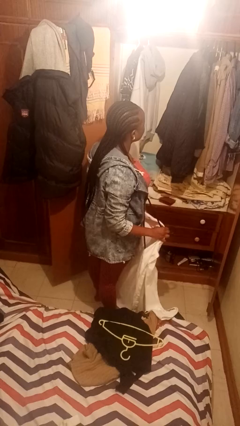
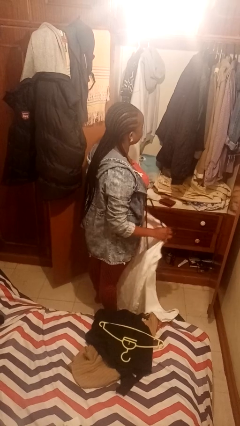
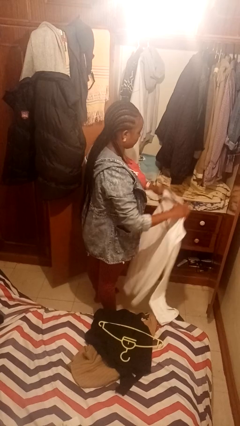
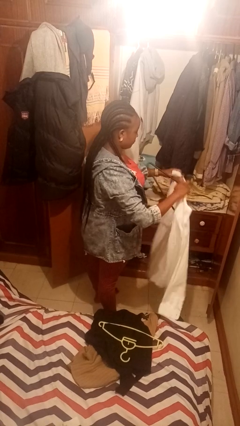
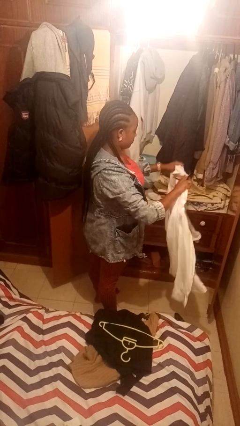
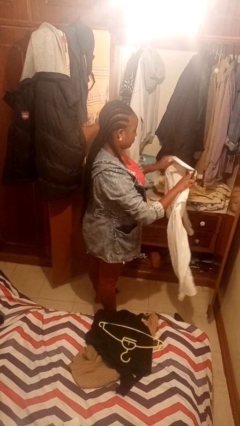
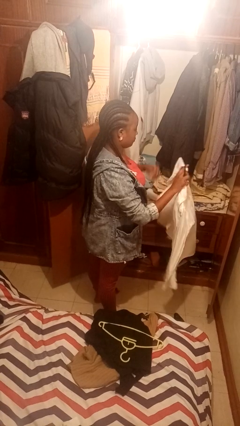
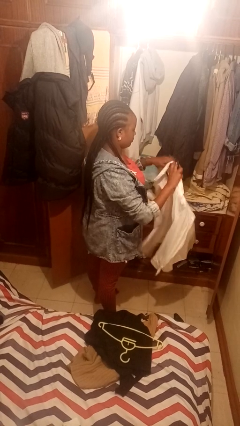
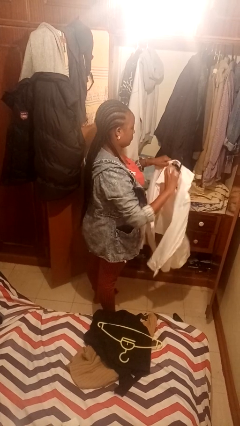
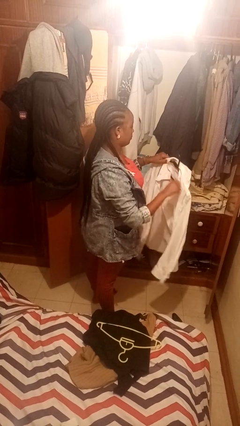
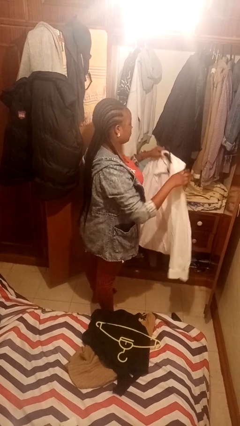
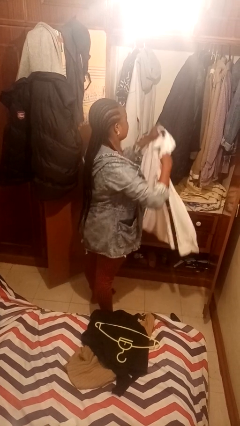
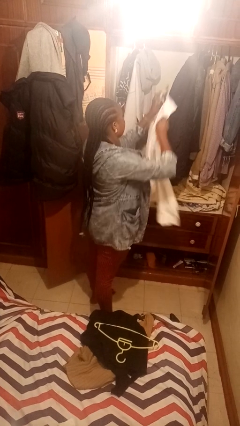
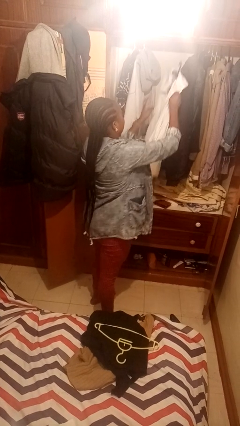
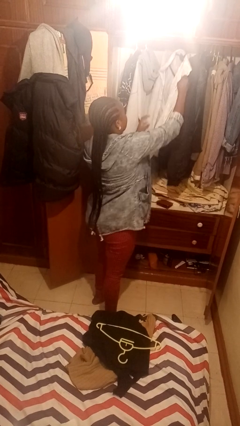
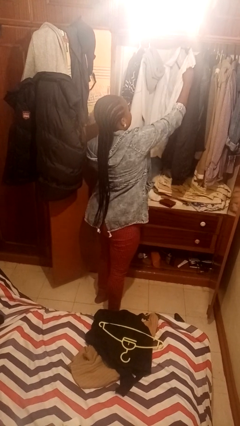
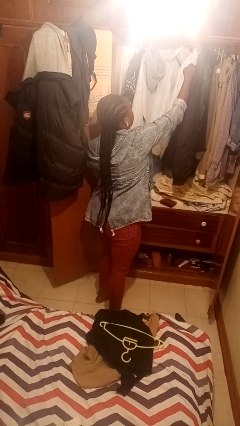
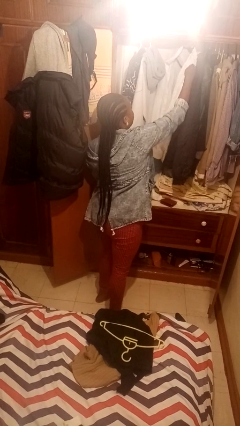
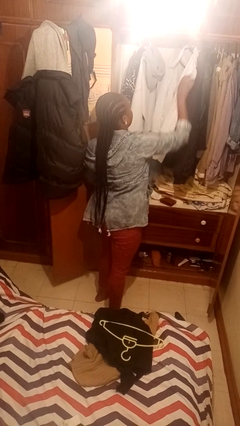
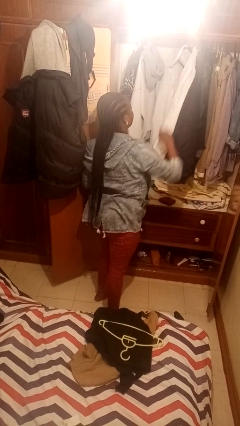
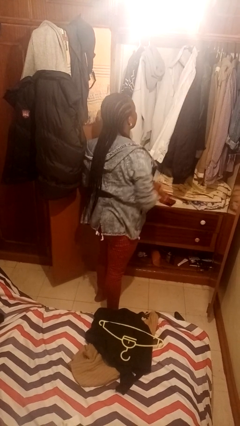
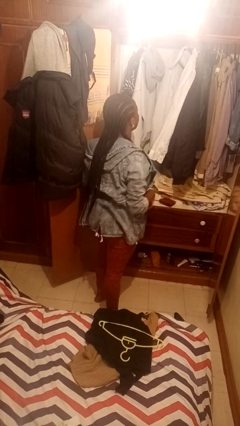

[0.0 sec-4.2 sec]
person puts clothes into closet

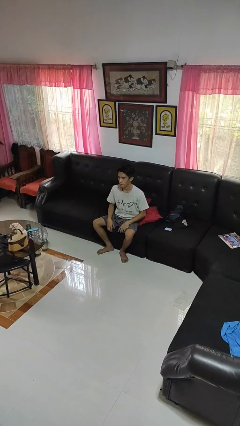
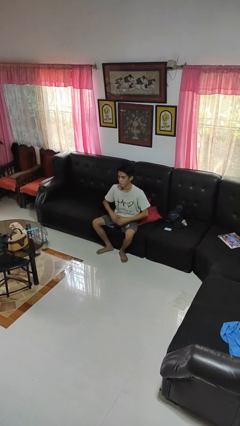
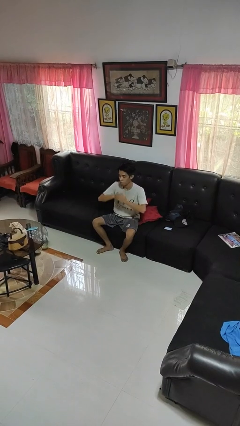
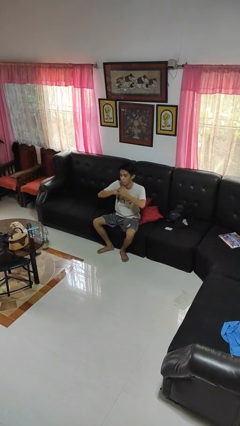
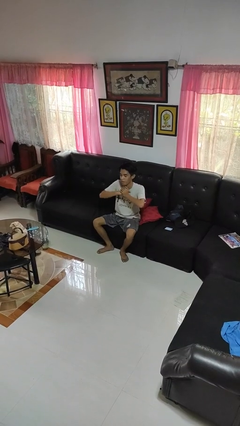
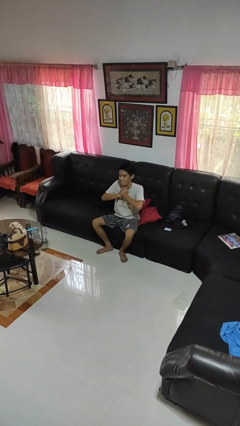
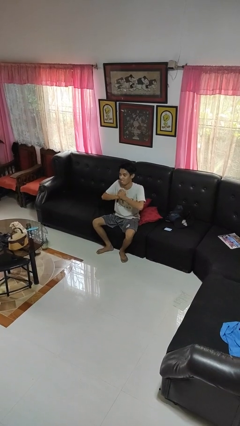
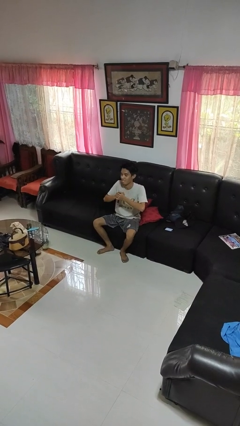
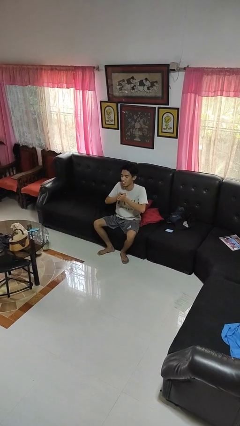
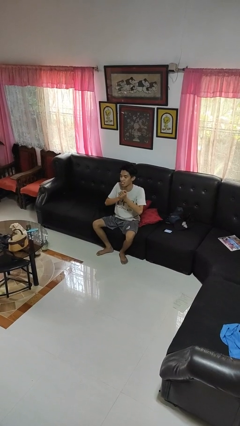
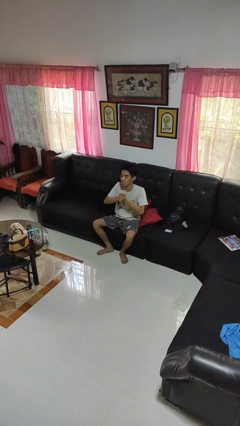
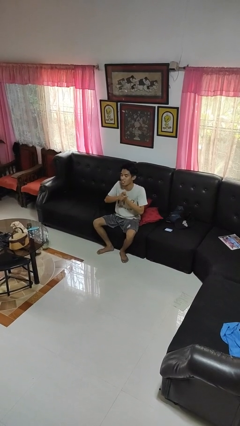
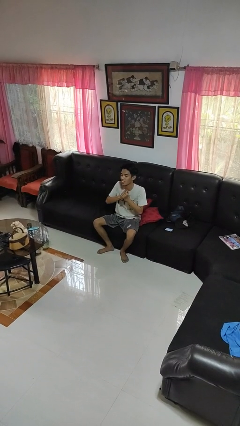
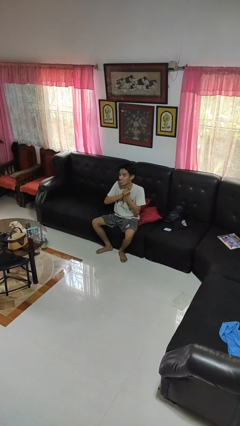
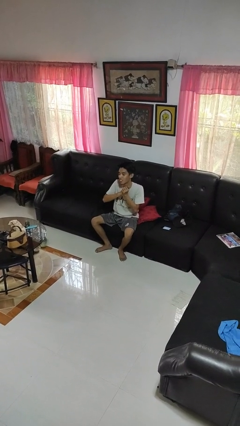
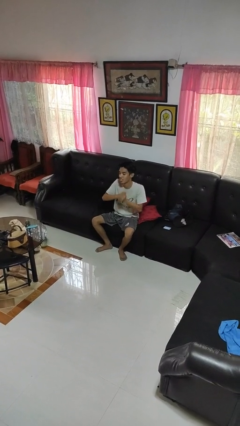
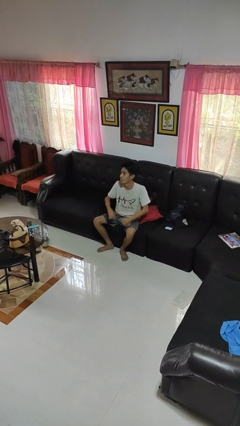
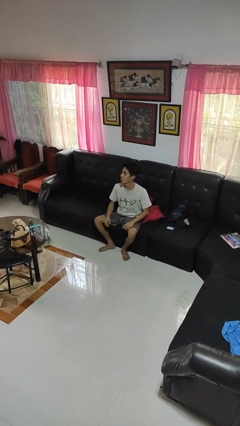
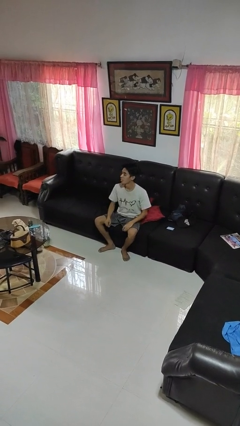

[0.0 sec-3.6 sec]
person cracks knuckles

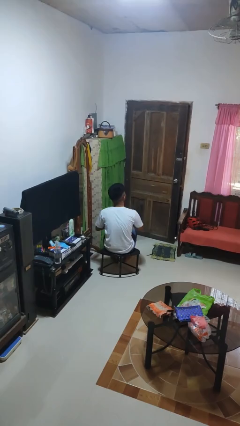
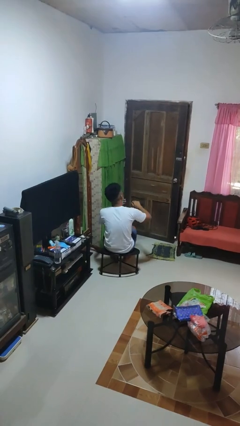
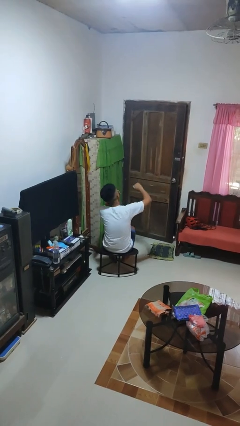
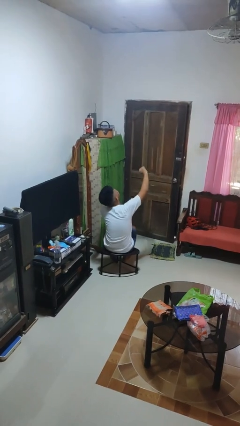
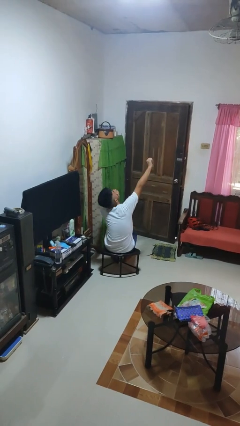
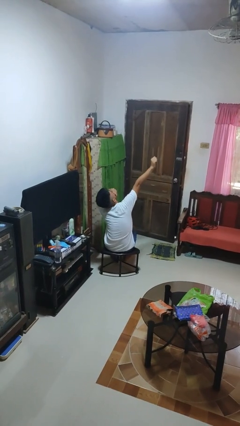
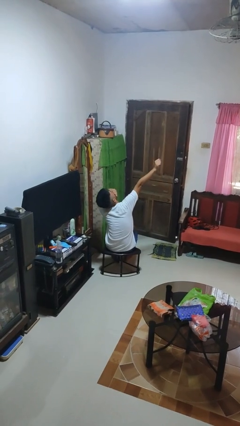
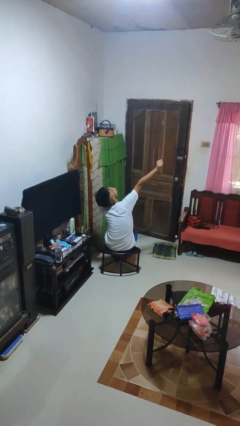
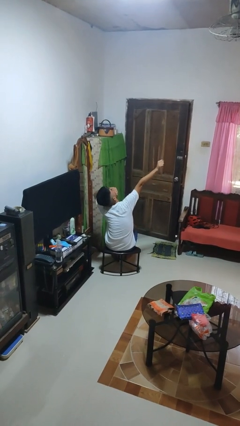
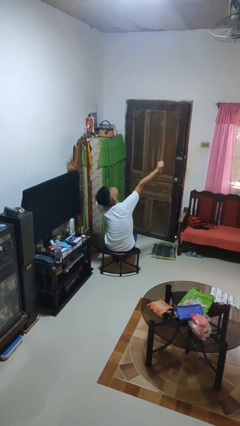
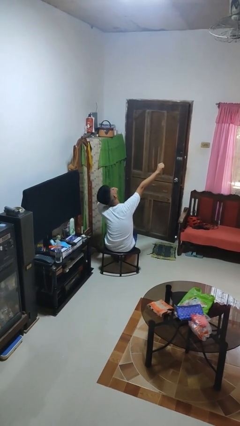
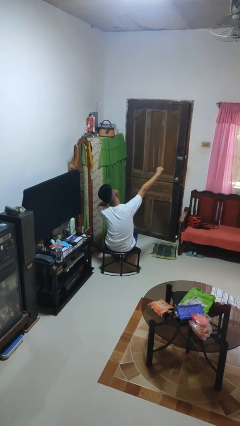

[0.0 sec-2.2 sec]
person yawns

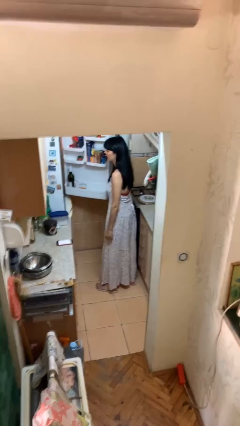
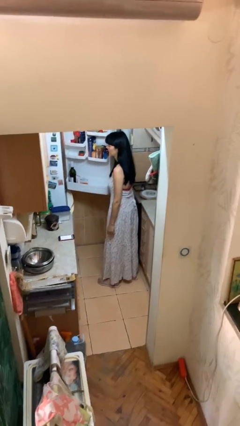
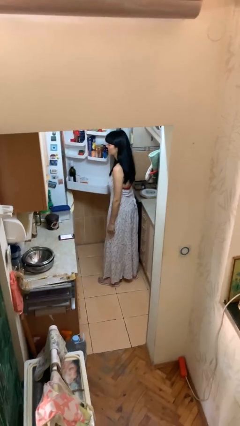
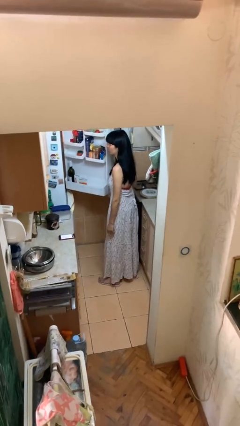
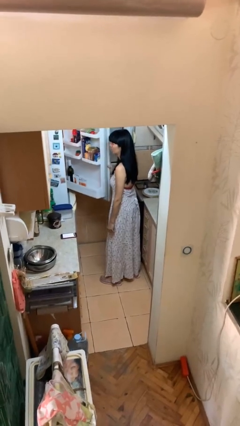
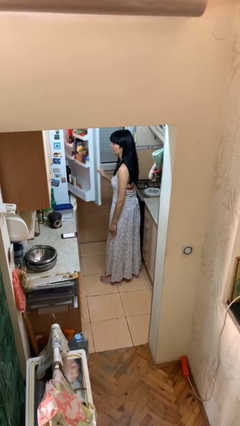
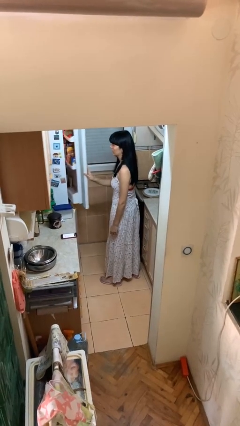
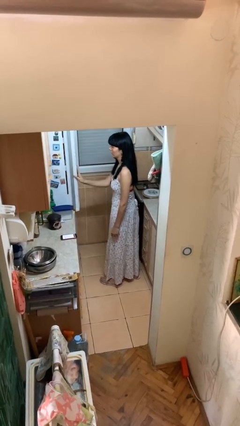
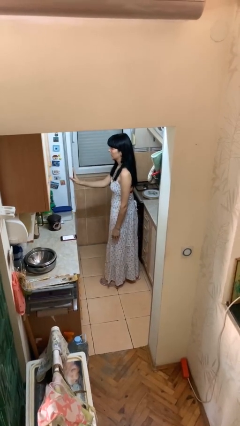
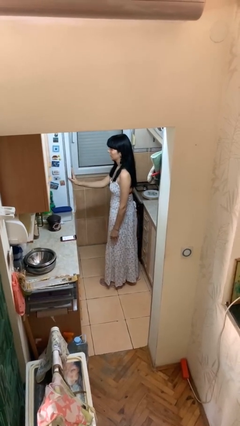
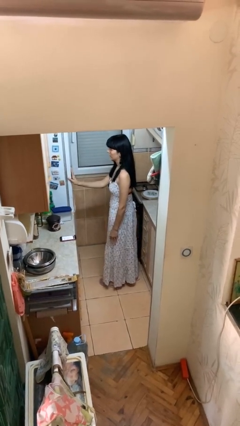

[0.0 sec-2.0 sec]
person closes refrigerator

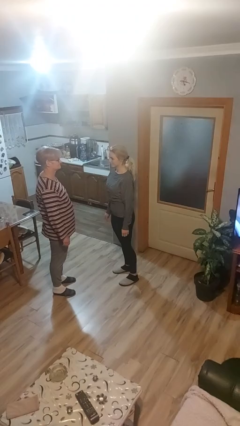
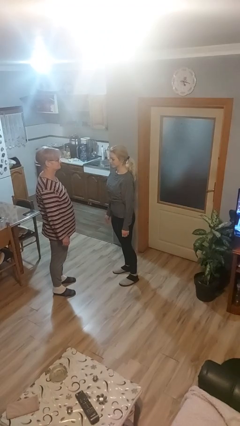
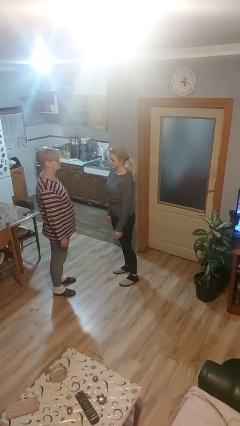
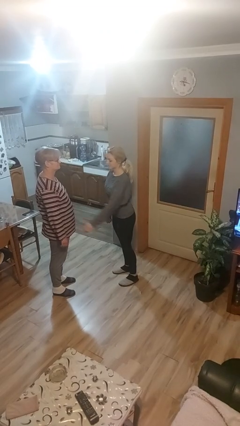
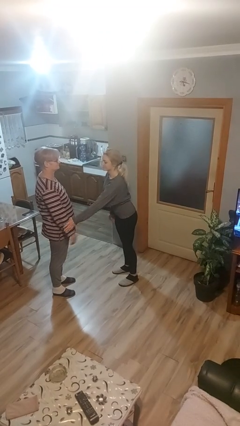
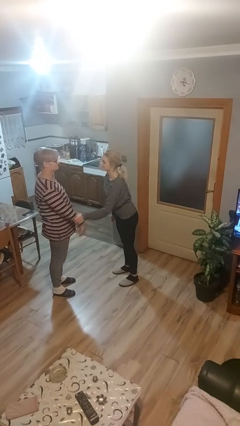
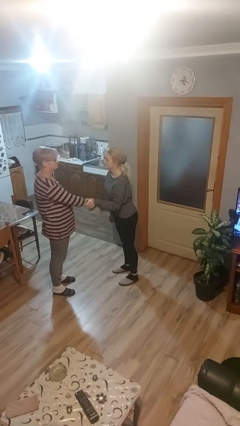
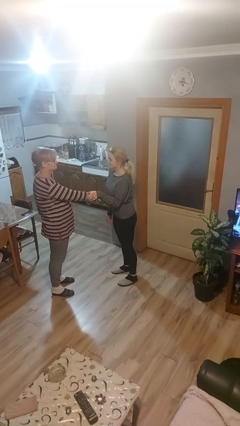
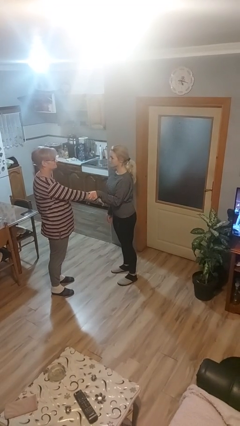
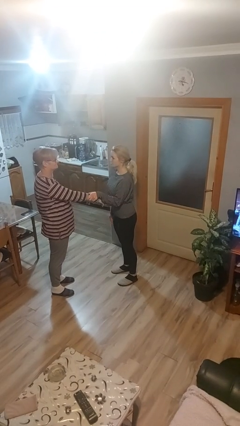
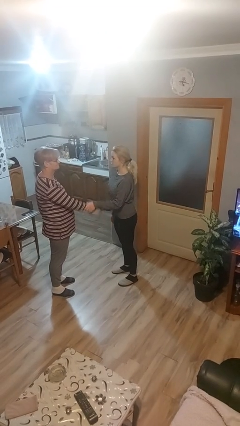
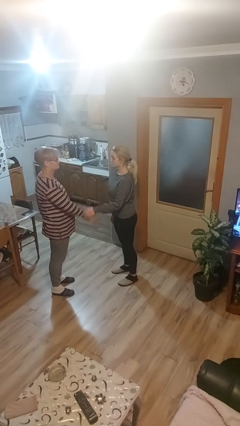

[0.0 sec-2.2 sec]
person grabs person by forearm

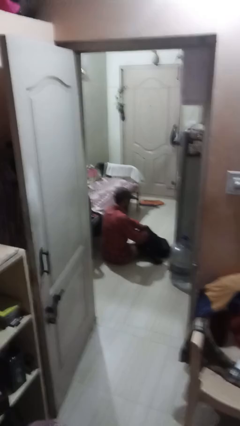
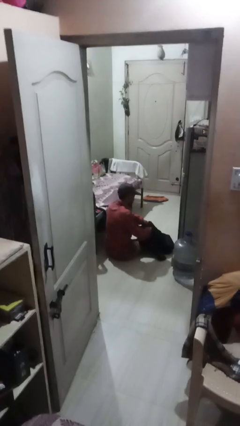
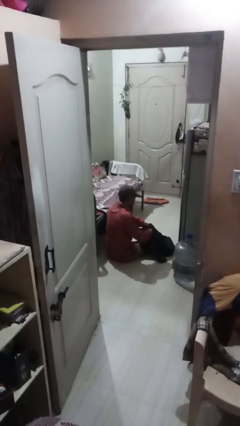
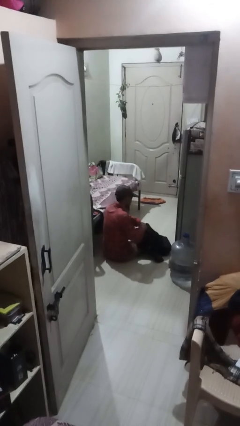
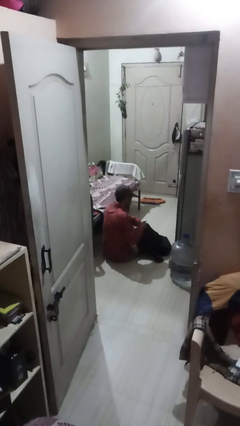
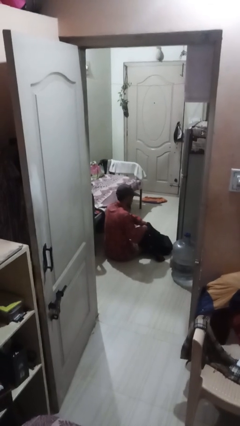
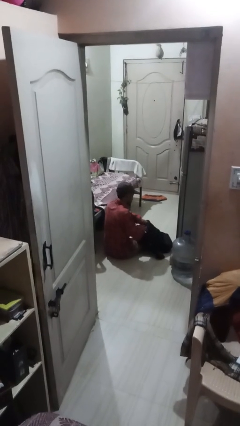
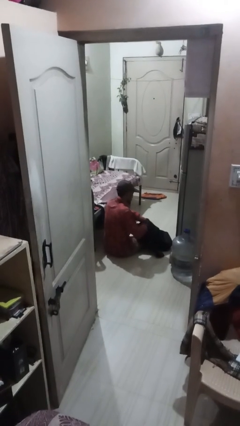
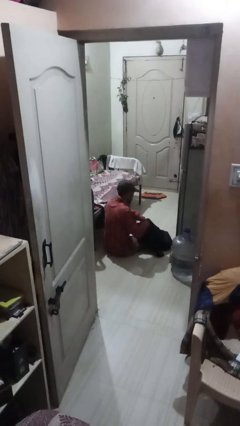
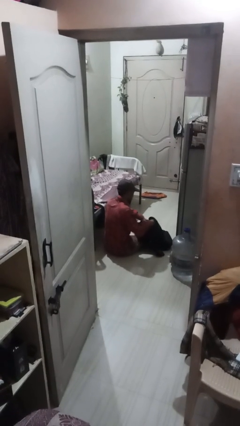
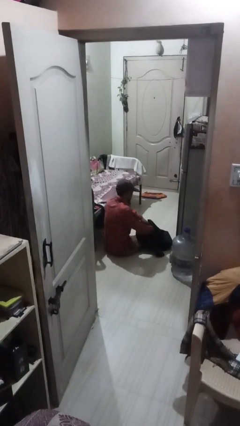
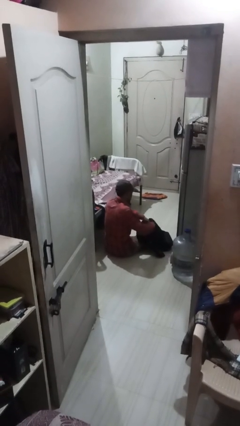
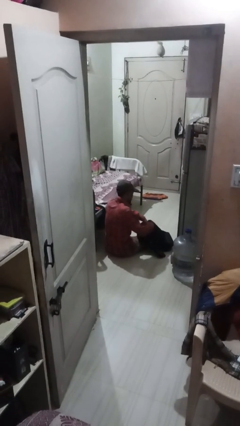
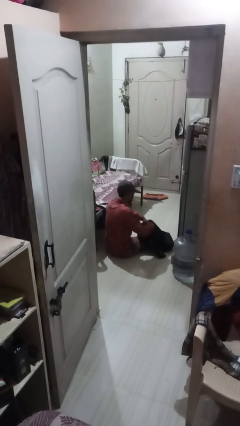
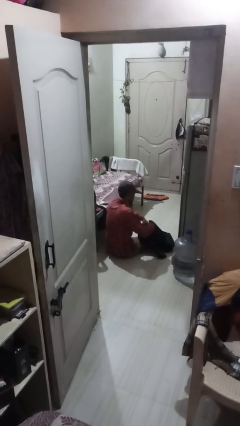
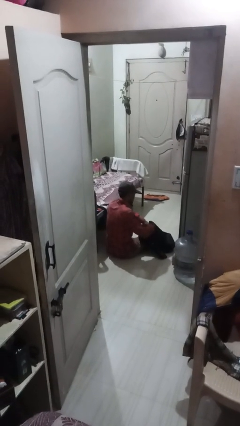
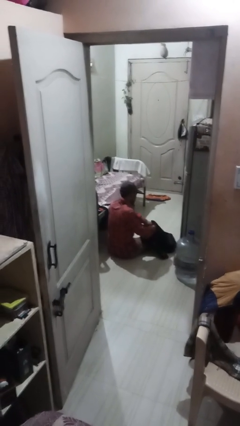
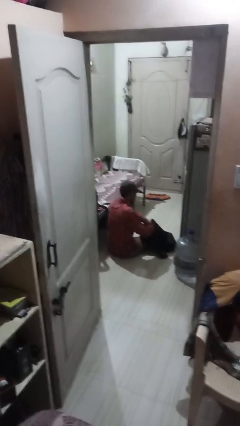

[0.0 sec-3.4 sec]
person searches in backpack

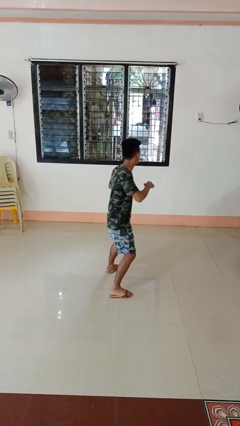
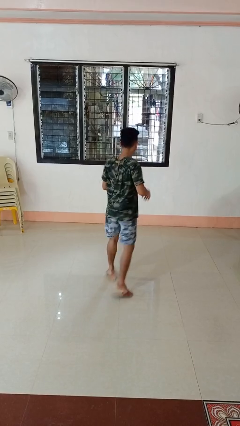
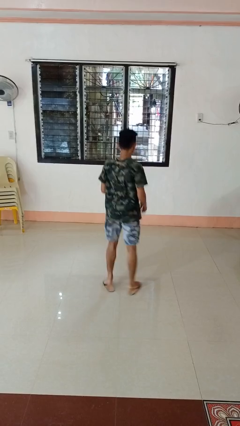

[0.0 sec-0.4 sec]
person karate chop
